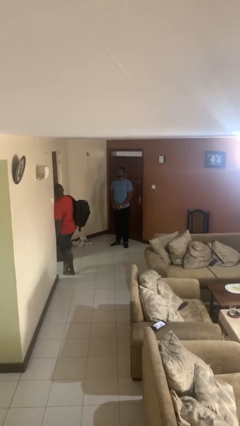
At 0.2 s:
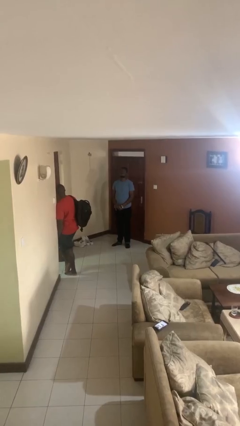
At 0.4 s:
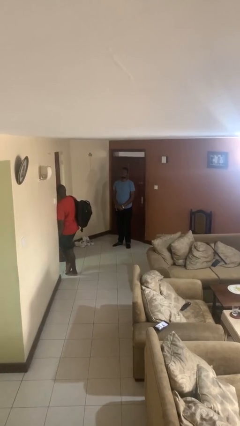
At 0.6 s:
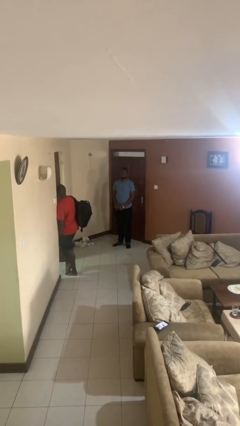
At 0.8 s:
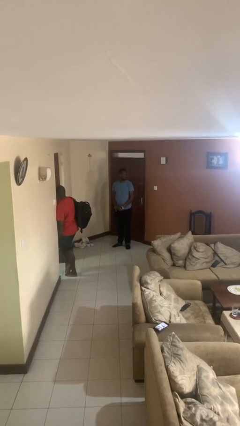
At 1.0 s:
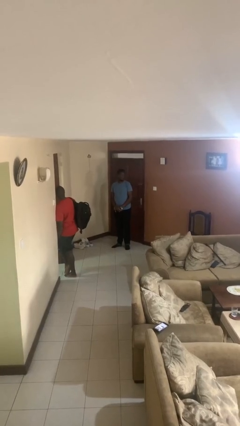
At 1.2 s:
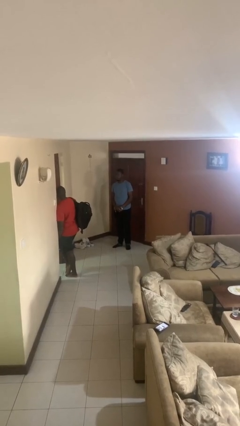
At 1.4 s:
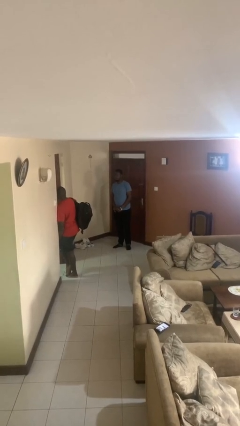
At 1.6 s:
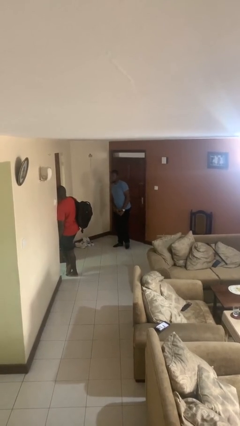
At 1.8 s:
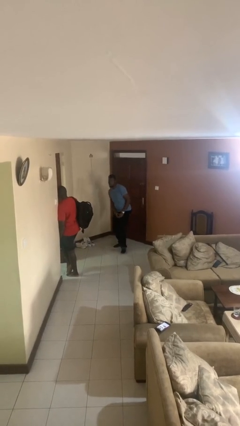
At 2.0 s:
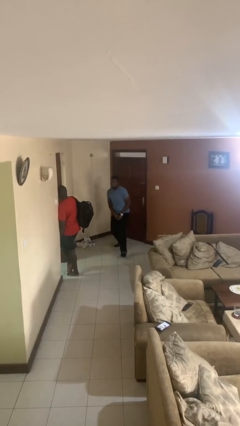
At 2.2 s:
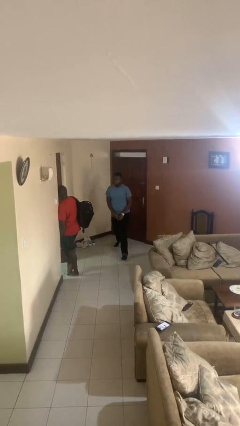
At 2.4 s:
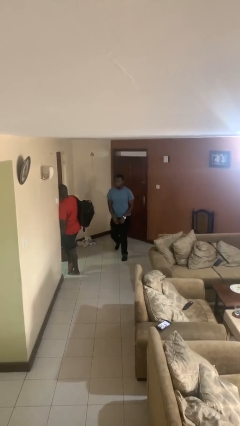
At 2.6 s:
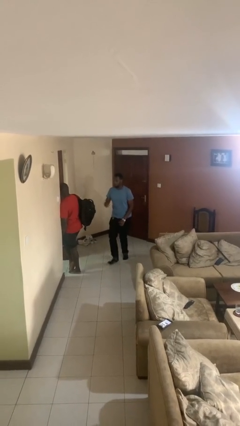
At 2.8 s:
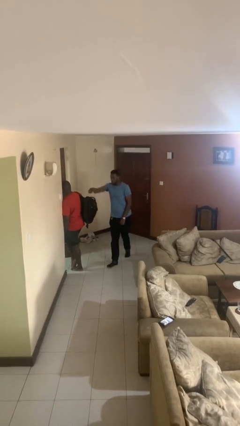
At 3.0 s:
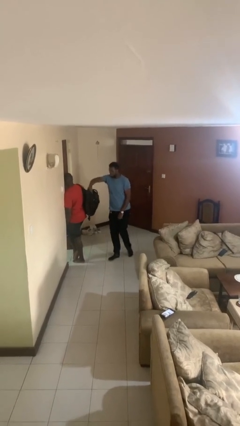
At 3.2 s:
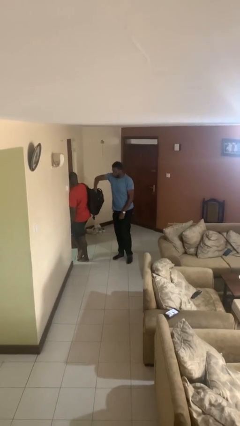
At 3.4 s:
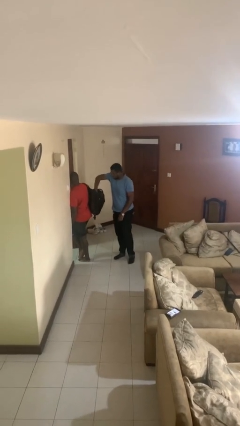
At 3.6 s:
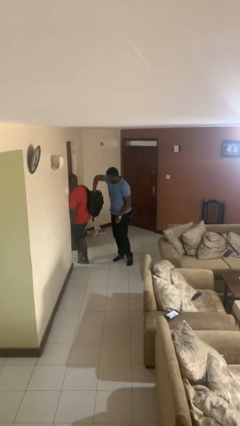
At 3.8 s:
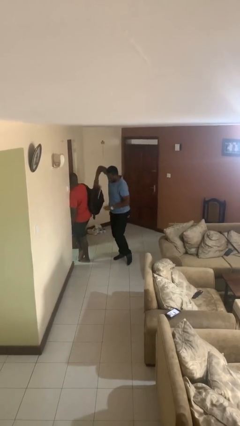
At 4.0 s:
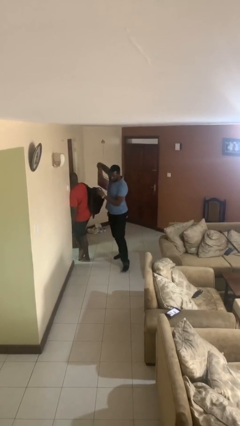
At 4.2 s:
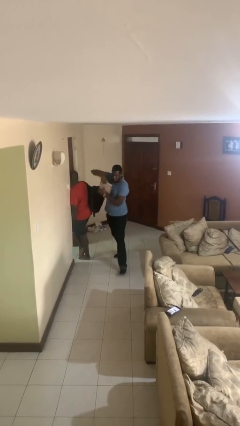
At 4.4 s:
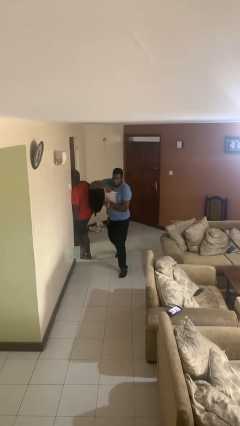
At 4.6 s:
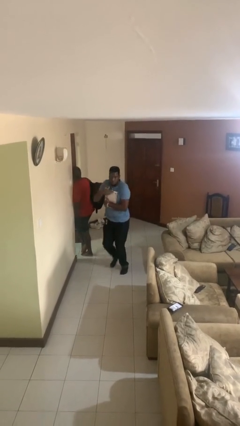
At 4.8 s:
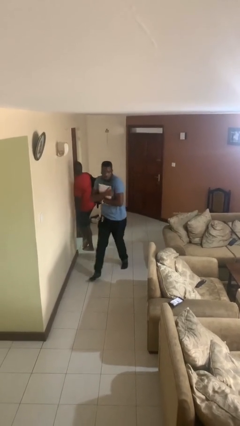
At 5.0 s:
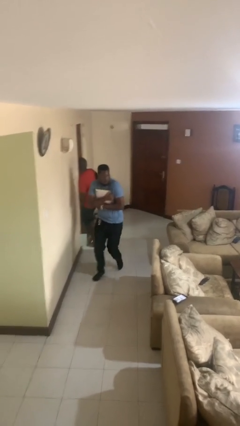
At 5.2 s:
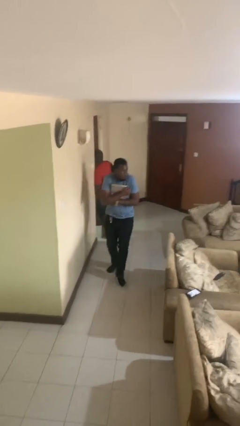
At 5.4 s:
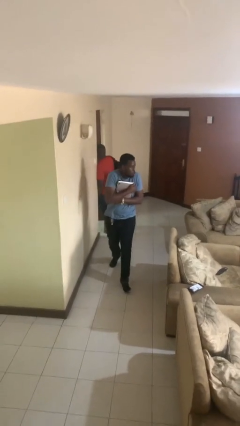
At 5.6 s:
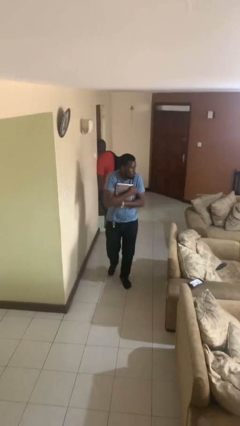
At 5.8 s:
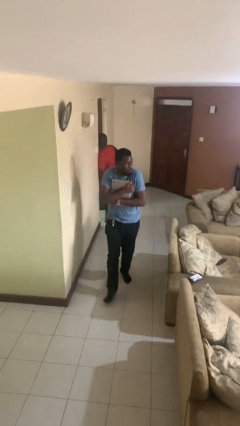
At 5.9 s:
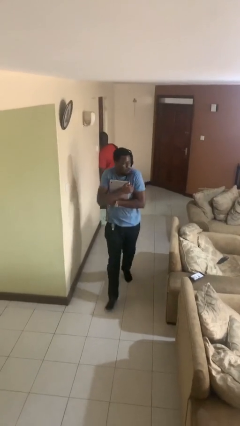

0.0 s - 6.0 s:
person steals object from person

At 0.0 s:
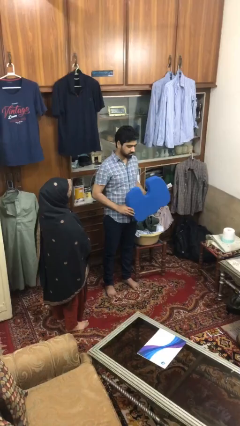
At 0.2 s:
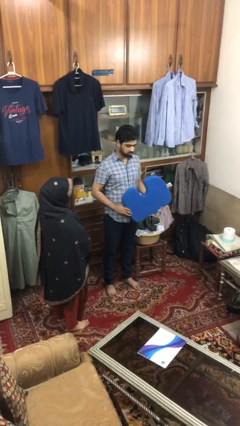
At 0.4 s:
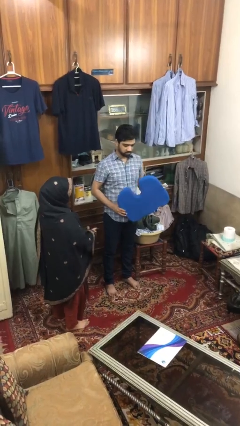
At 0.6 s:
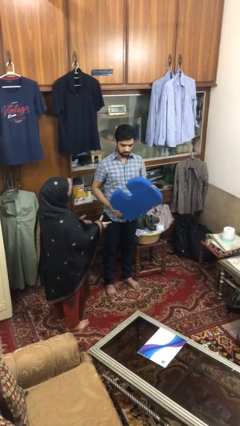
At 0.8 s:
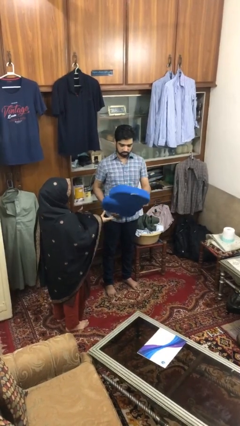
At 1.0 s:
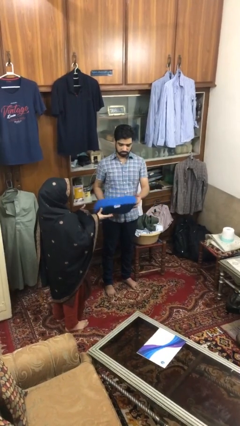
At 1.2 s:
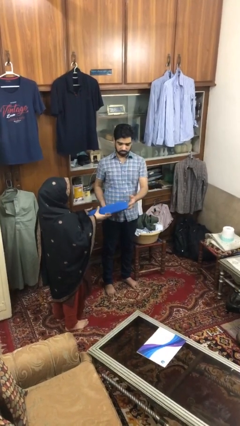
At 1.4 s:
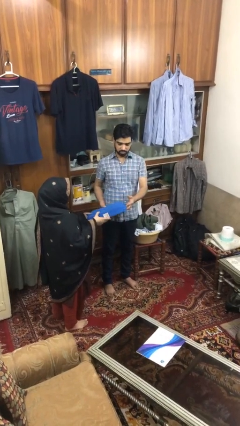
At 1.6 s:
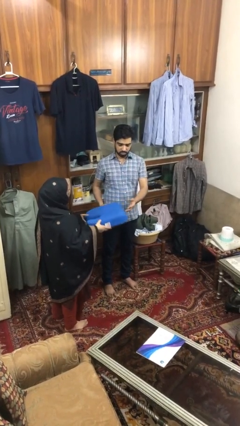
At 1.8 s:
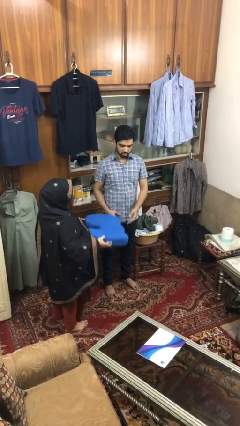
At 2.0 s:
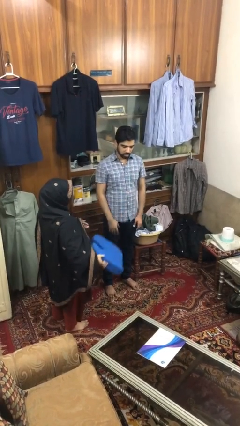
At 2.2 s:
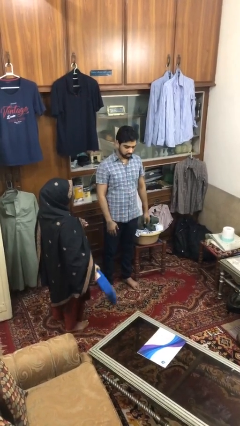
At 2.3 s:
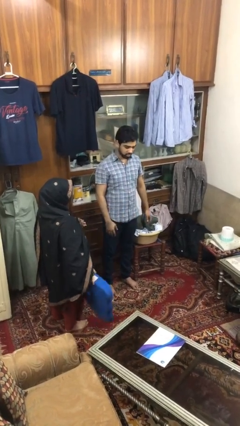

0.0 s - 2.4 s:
person transfers object to person

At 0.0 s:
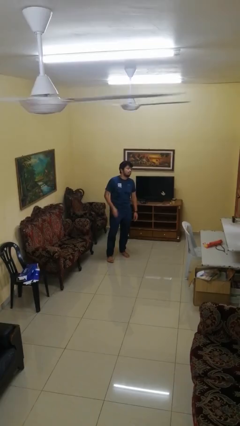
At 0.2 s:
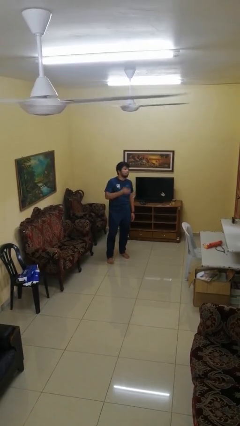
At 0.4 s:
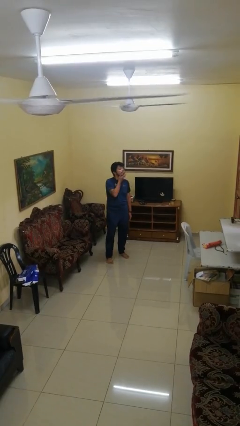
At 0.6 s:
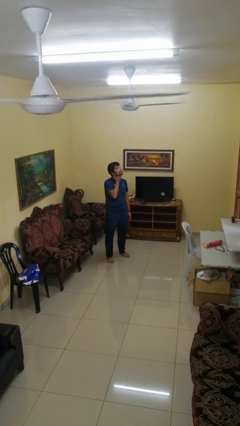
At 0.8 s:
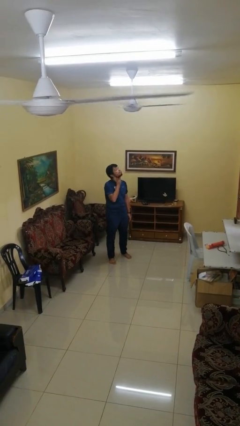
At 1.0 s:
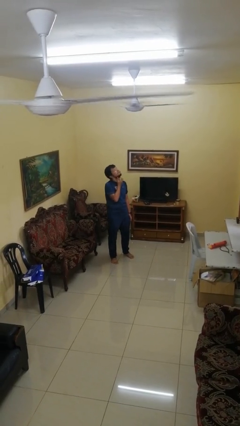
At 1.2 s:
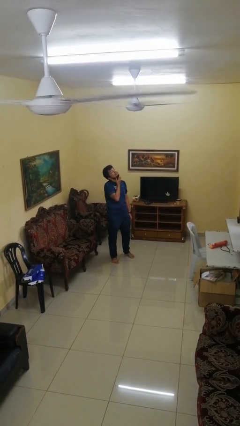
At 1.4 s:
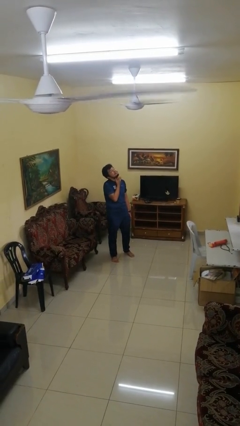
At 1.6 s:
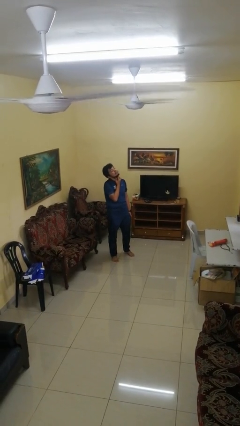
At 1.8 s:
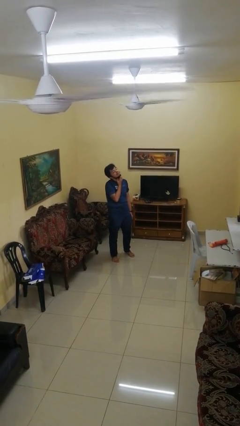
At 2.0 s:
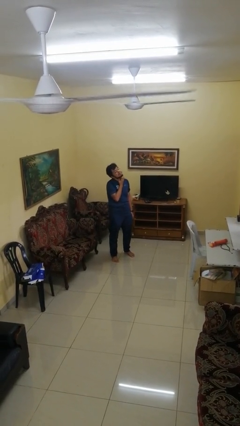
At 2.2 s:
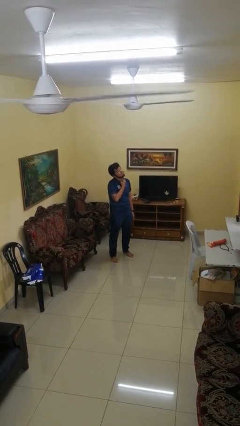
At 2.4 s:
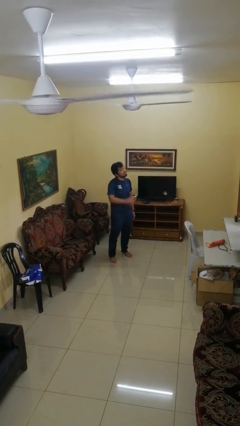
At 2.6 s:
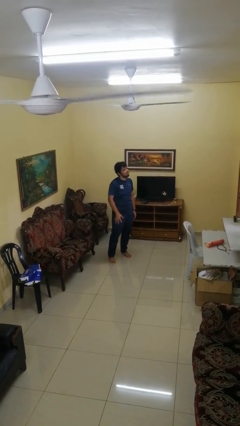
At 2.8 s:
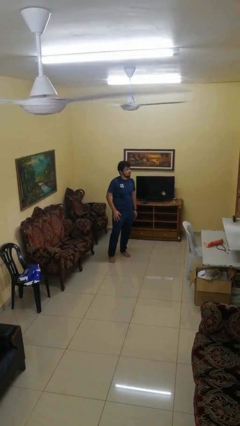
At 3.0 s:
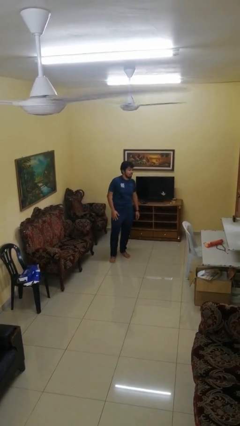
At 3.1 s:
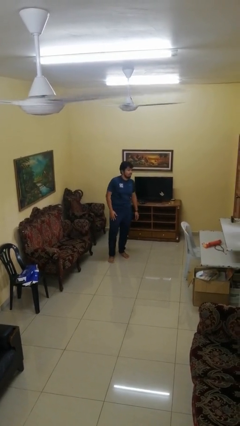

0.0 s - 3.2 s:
person scratches face

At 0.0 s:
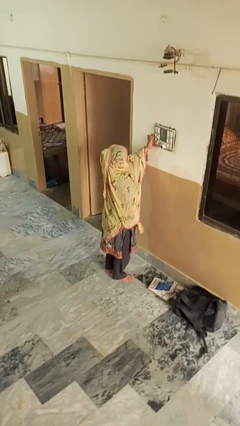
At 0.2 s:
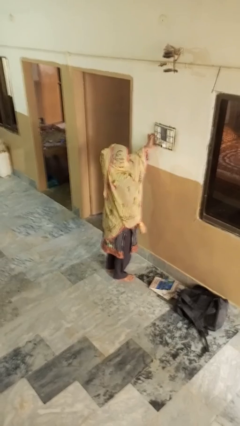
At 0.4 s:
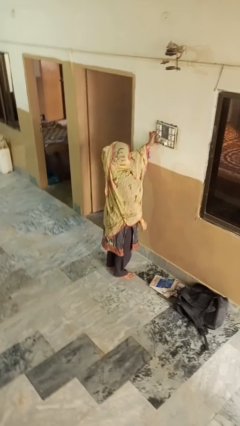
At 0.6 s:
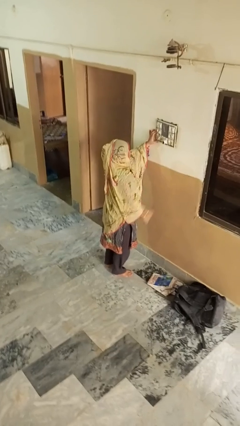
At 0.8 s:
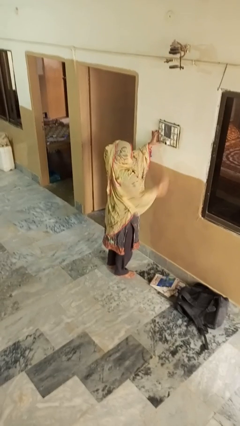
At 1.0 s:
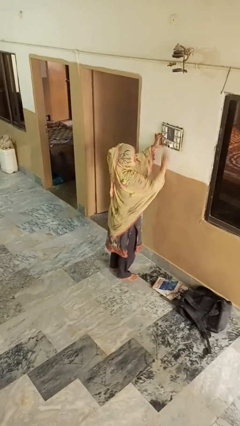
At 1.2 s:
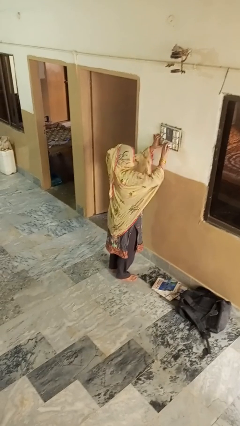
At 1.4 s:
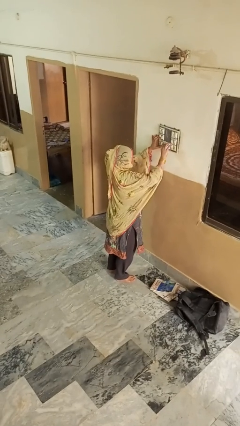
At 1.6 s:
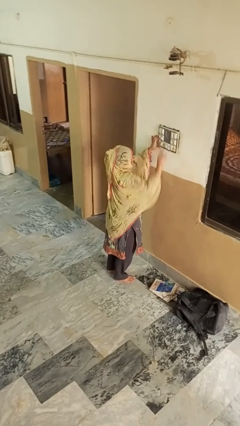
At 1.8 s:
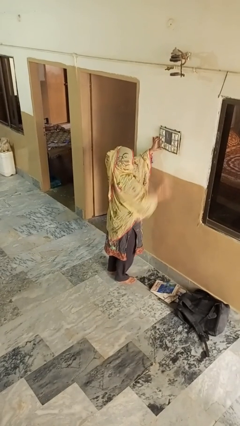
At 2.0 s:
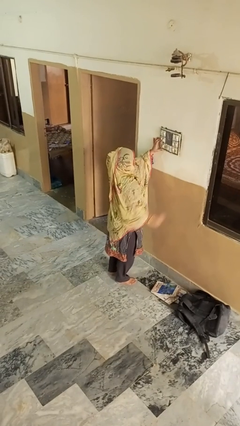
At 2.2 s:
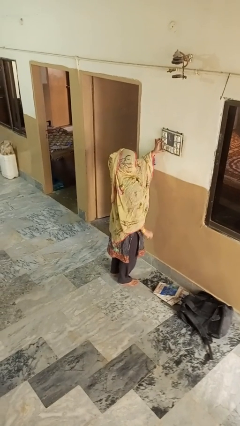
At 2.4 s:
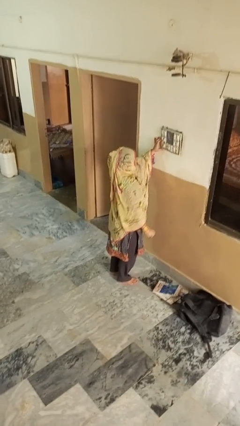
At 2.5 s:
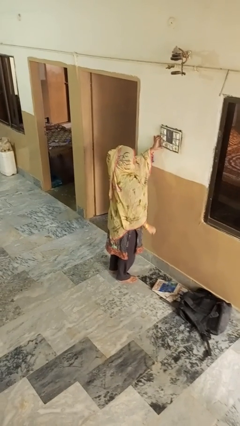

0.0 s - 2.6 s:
person unplugs from electrical socket

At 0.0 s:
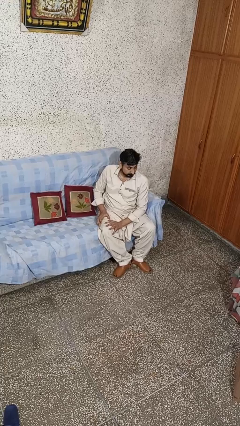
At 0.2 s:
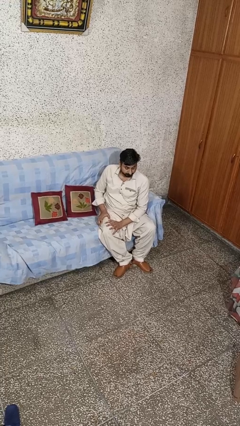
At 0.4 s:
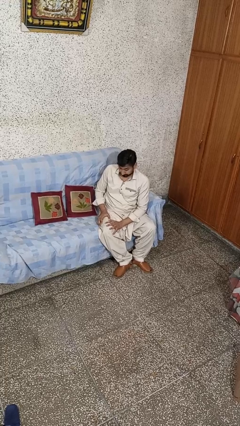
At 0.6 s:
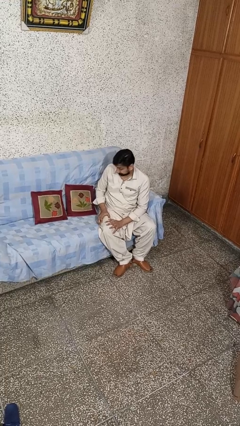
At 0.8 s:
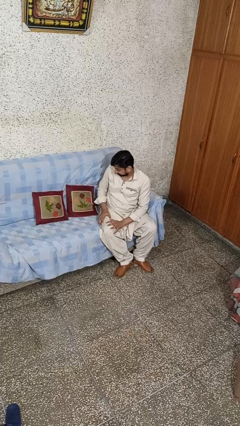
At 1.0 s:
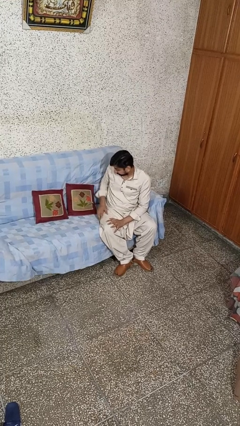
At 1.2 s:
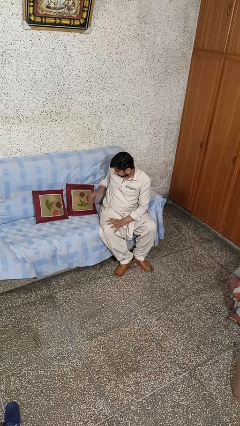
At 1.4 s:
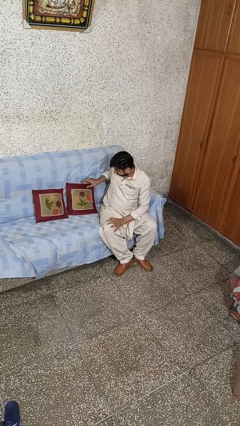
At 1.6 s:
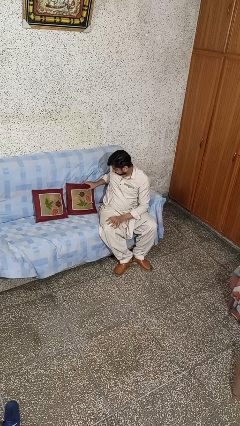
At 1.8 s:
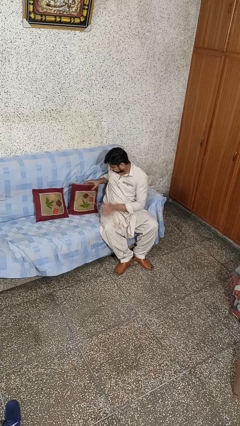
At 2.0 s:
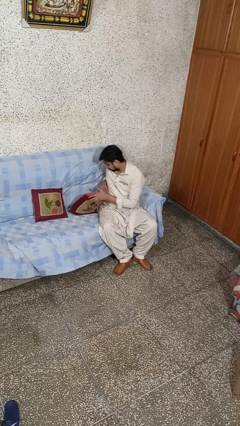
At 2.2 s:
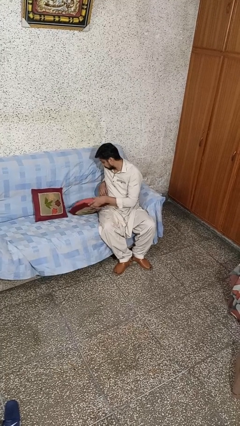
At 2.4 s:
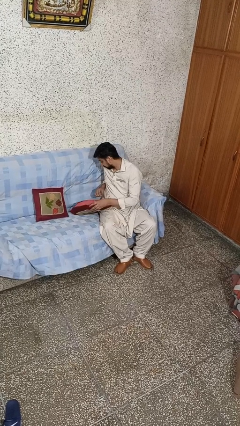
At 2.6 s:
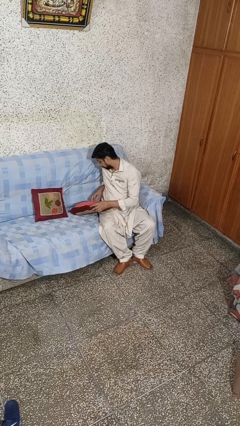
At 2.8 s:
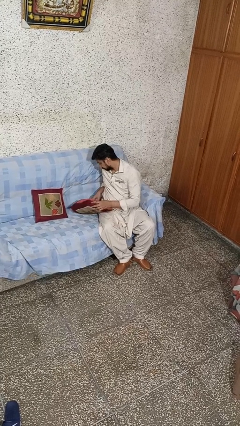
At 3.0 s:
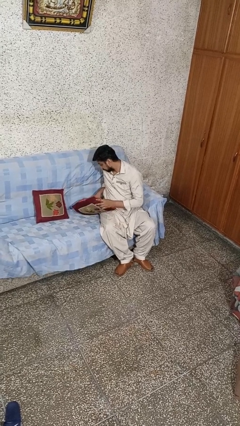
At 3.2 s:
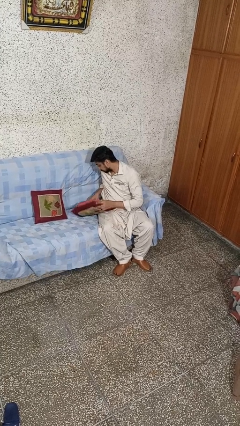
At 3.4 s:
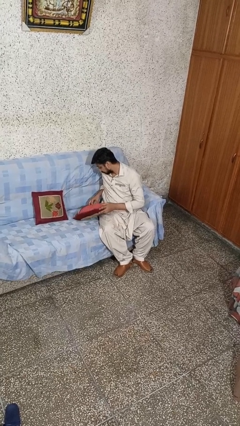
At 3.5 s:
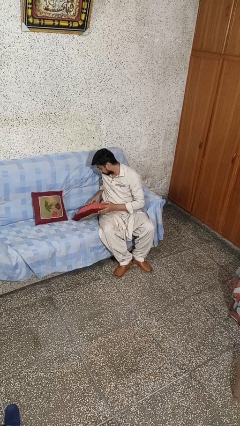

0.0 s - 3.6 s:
person searches in couch

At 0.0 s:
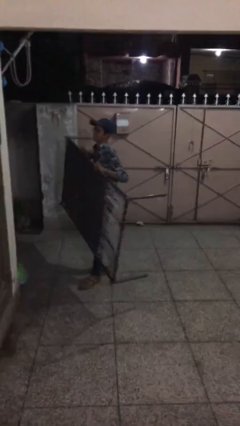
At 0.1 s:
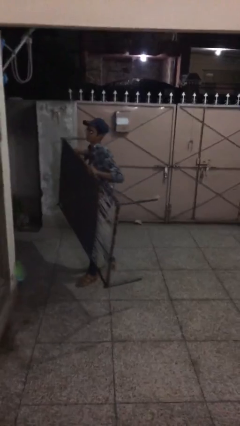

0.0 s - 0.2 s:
person puts down object on floor
